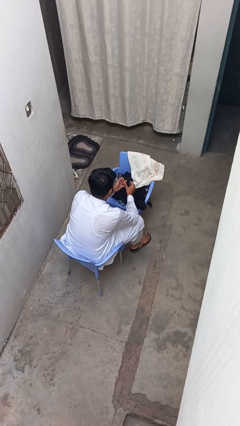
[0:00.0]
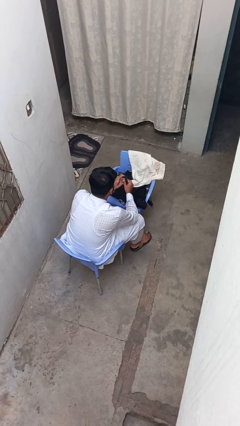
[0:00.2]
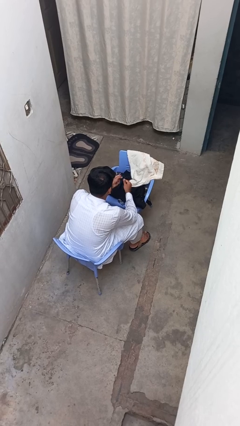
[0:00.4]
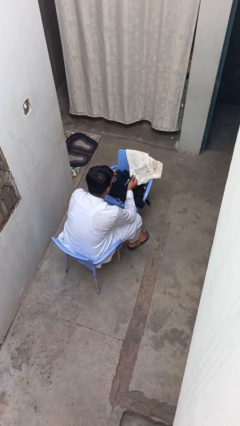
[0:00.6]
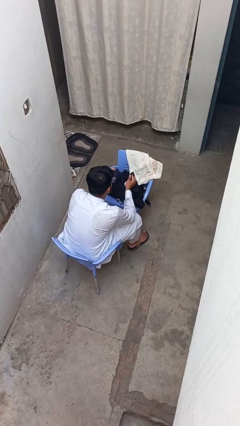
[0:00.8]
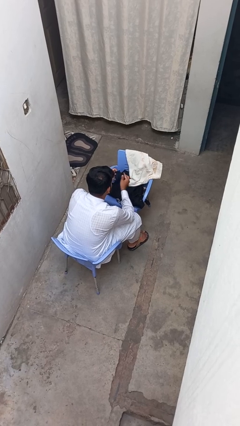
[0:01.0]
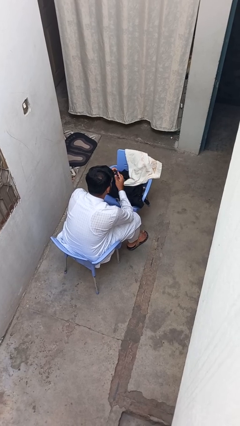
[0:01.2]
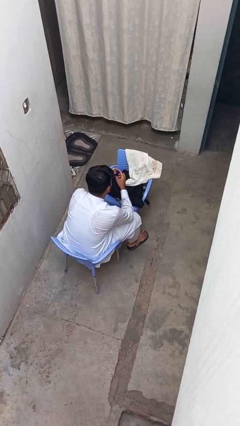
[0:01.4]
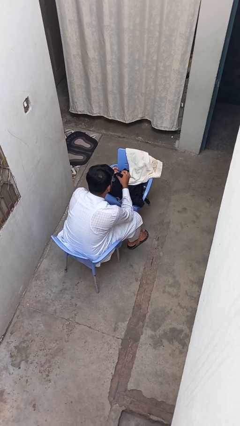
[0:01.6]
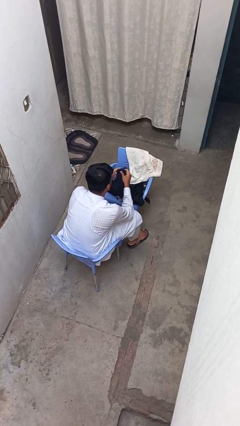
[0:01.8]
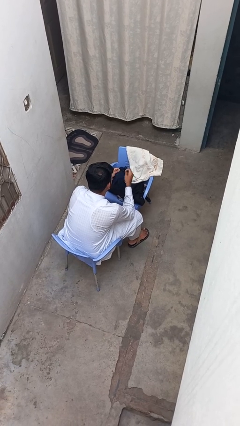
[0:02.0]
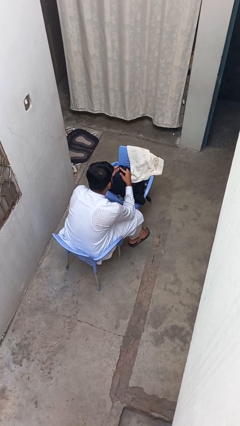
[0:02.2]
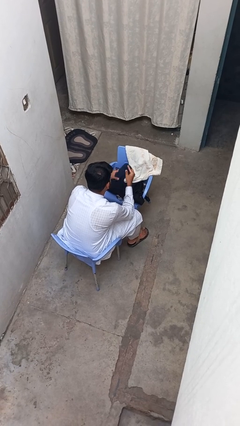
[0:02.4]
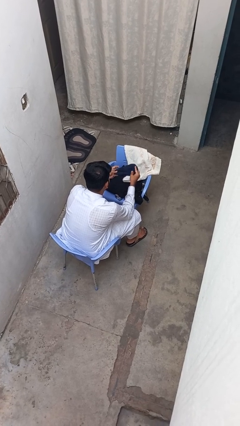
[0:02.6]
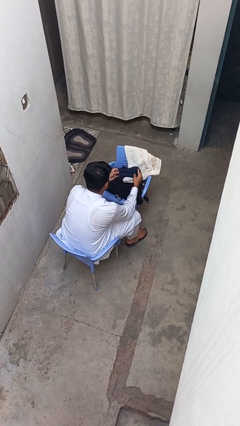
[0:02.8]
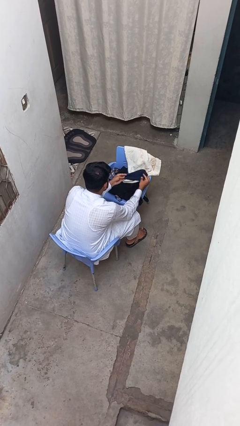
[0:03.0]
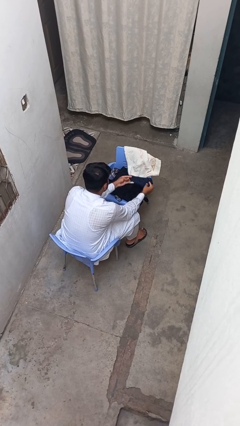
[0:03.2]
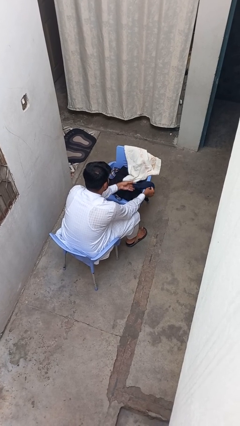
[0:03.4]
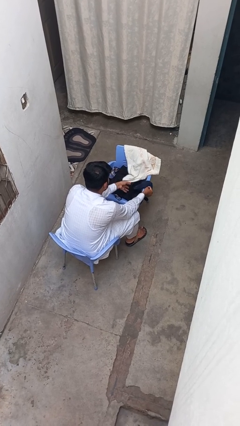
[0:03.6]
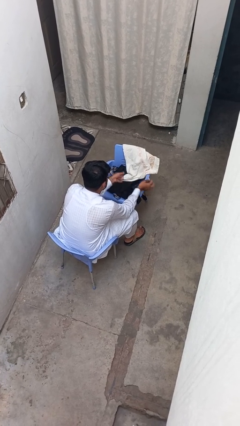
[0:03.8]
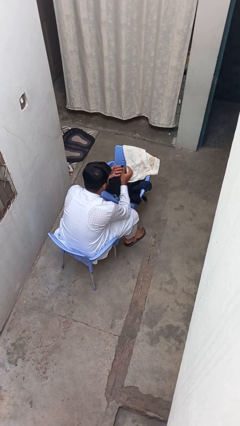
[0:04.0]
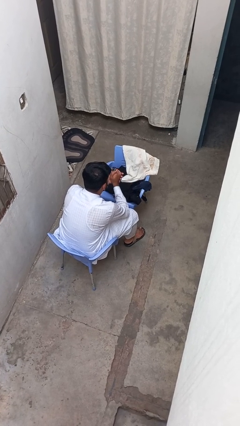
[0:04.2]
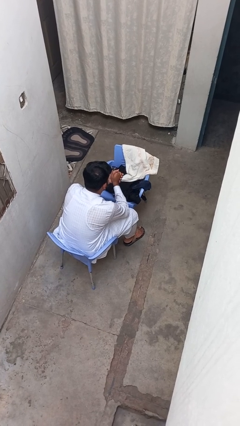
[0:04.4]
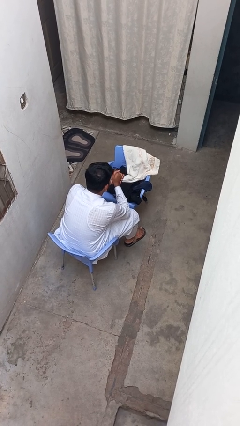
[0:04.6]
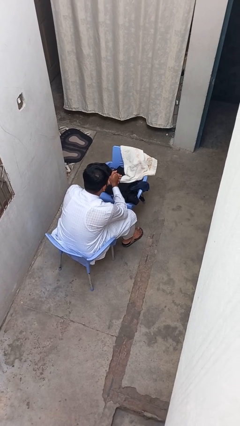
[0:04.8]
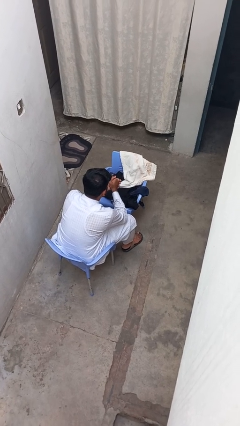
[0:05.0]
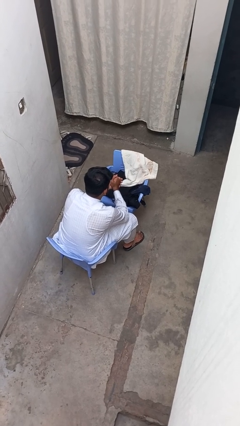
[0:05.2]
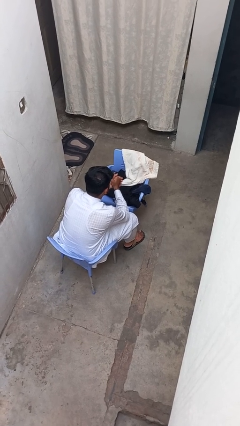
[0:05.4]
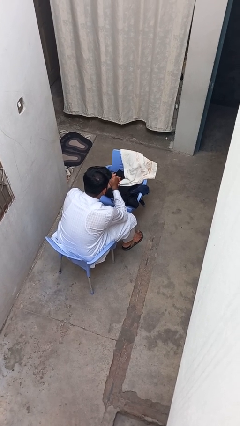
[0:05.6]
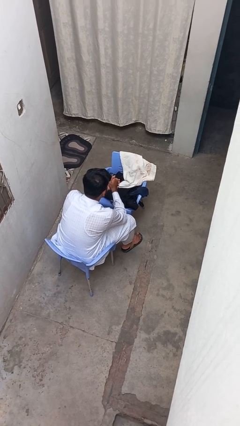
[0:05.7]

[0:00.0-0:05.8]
person folds socks

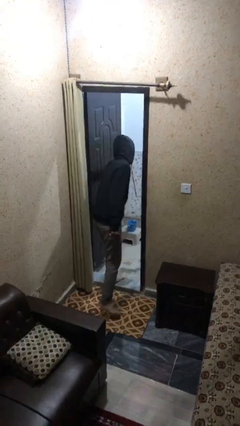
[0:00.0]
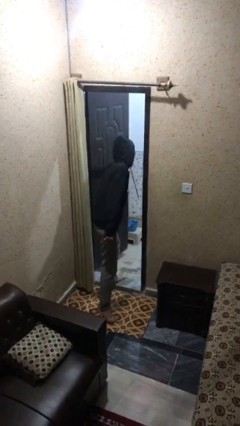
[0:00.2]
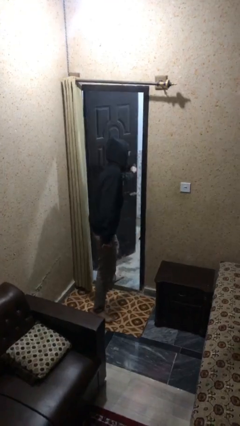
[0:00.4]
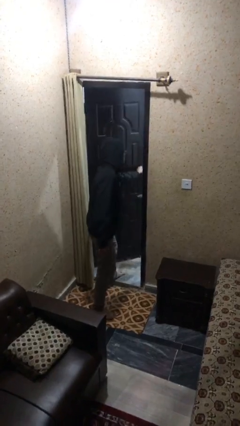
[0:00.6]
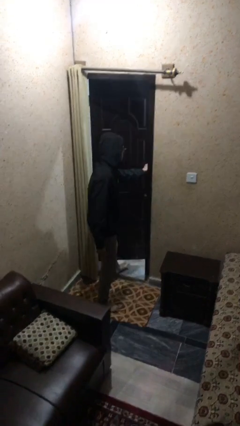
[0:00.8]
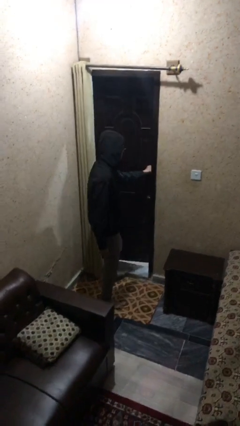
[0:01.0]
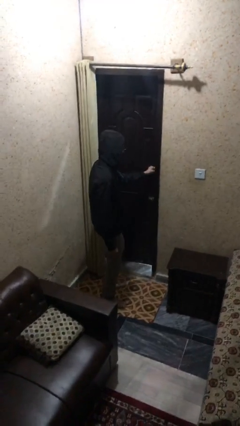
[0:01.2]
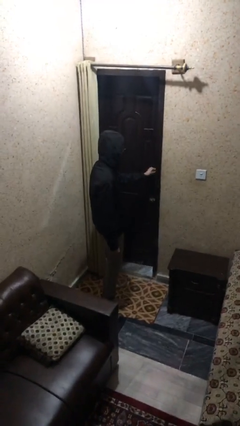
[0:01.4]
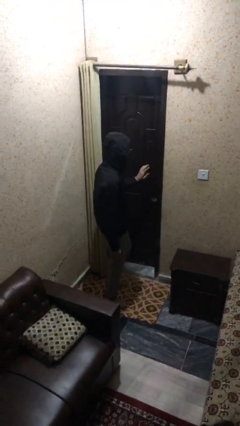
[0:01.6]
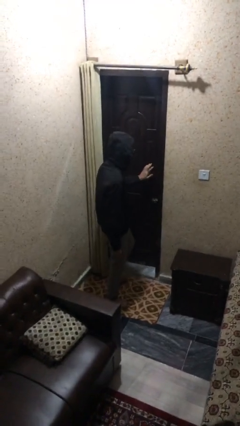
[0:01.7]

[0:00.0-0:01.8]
person closes facility door

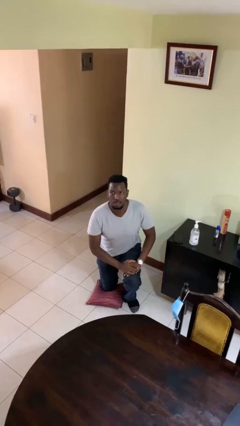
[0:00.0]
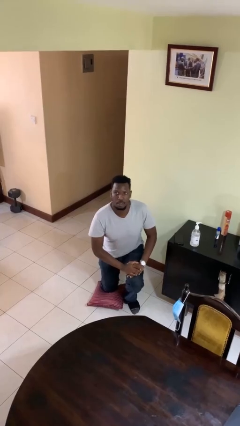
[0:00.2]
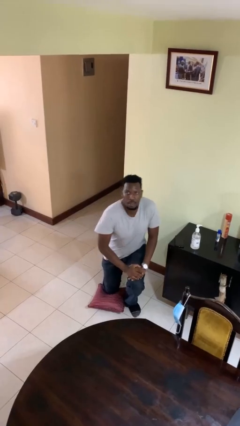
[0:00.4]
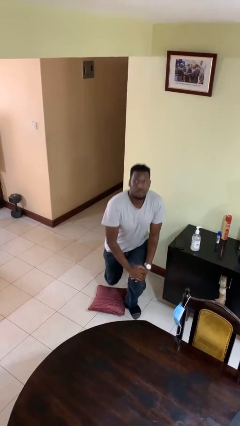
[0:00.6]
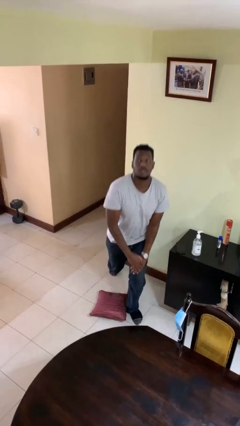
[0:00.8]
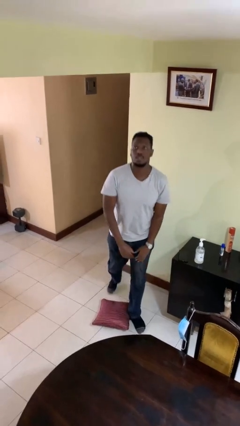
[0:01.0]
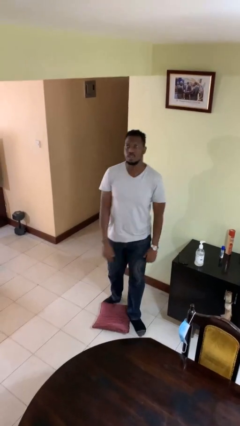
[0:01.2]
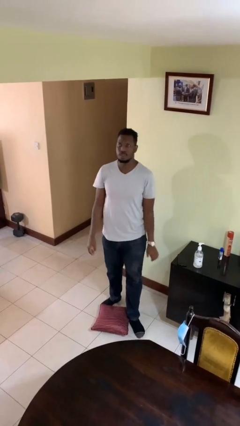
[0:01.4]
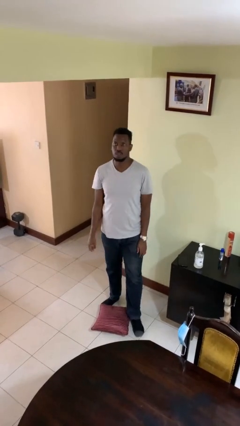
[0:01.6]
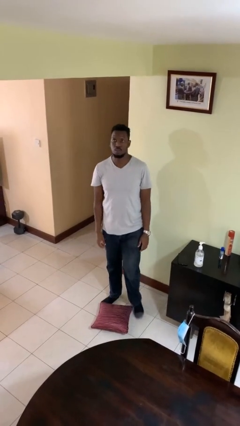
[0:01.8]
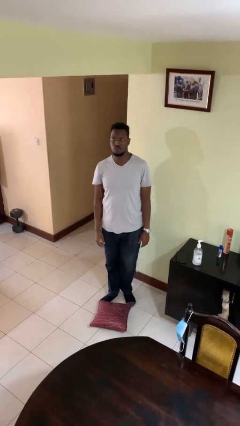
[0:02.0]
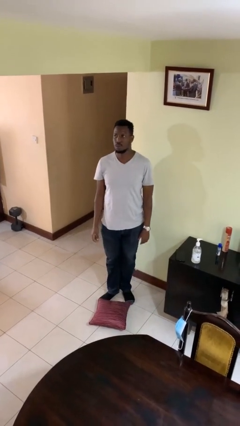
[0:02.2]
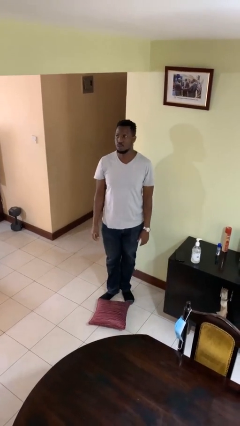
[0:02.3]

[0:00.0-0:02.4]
person stands up from floor

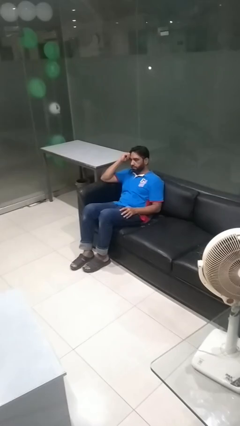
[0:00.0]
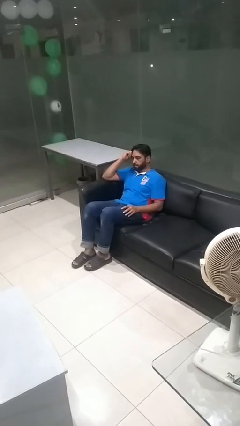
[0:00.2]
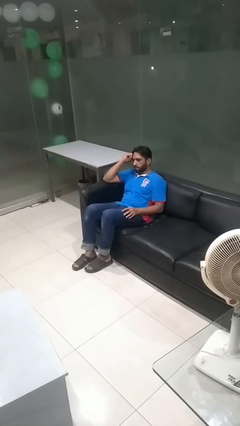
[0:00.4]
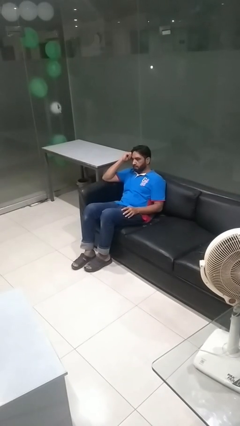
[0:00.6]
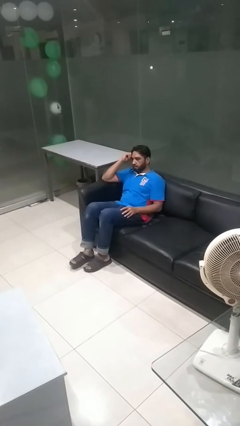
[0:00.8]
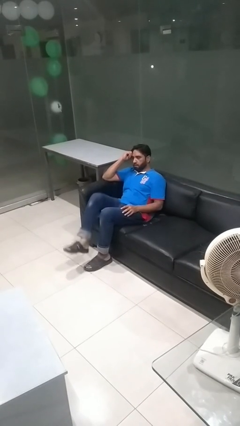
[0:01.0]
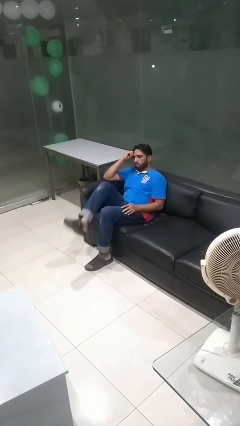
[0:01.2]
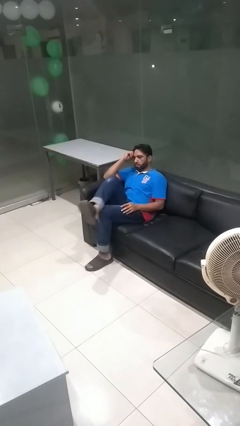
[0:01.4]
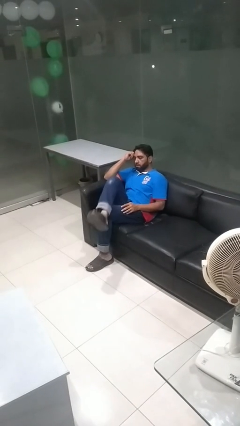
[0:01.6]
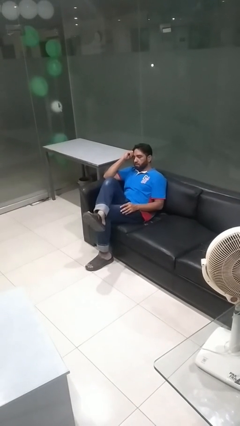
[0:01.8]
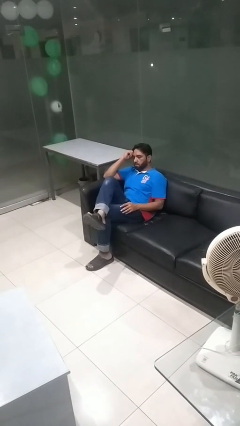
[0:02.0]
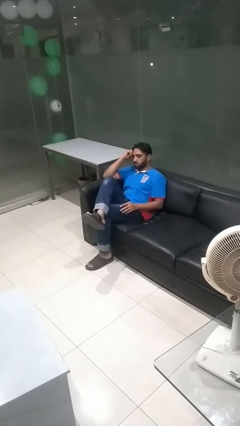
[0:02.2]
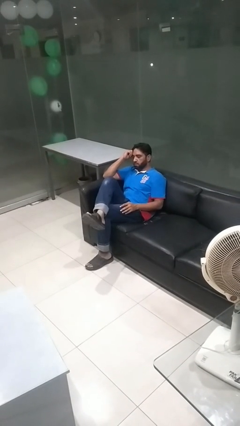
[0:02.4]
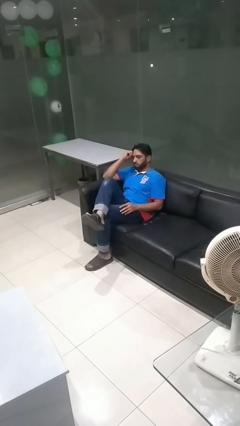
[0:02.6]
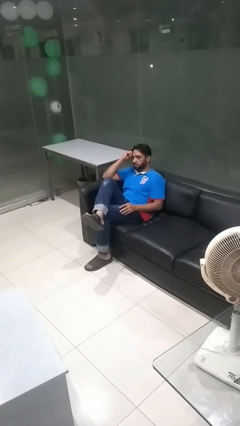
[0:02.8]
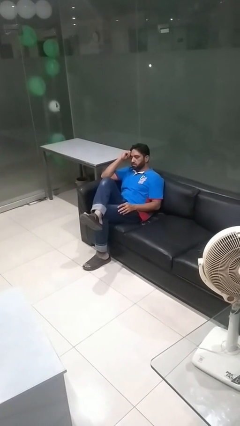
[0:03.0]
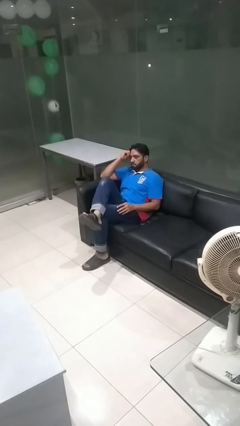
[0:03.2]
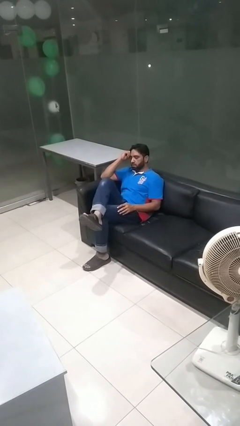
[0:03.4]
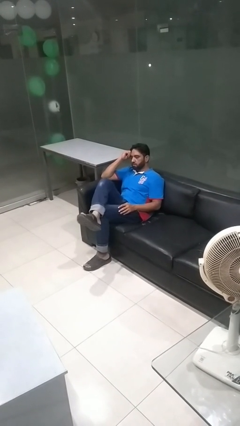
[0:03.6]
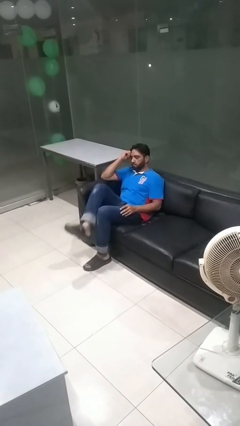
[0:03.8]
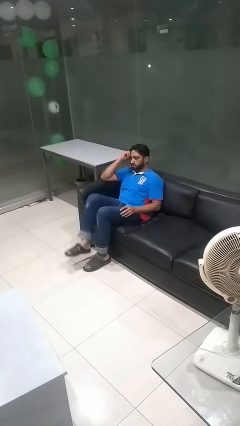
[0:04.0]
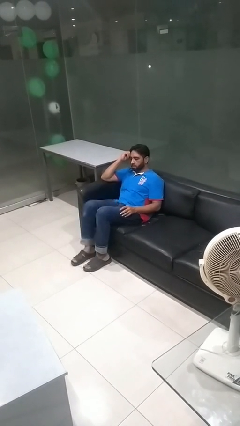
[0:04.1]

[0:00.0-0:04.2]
person crosses legs

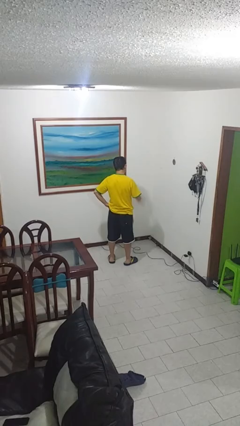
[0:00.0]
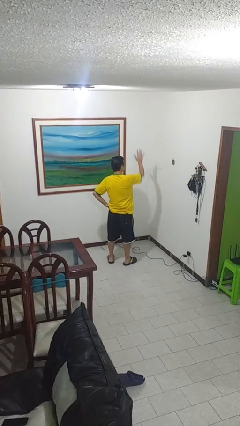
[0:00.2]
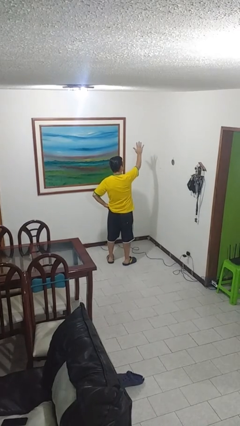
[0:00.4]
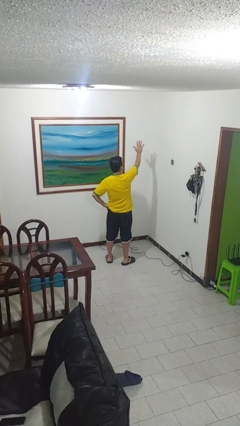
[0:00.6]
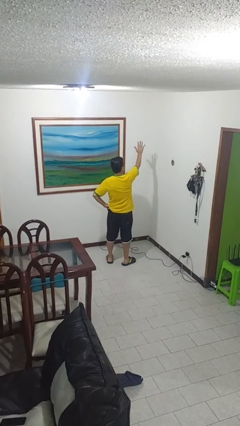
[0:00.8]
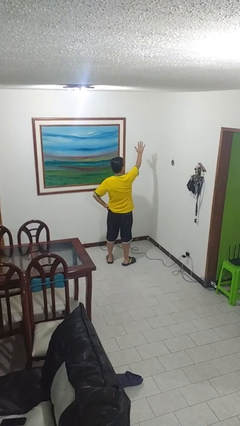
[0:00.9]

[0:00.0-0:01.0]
person gestures number five

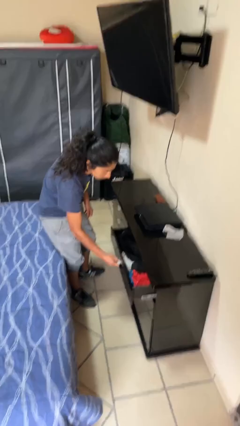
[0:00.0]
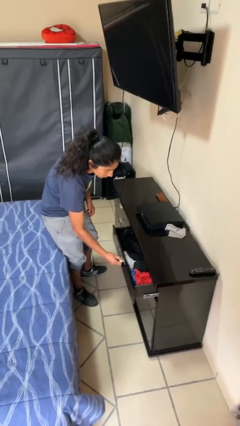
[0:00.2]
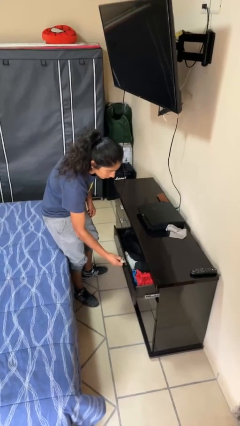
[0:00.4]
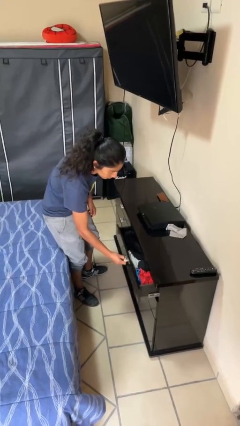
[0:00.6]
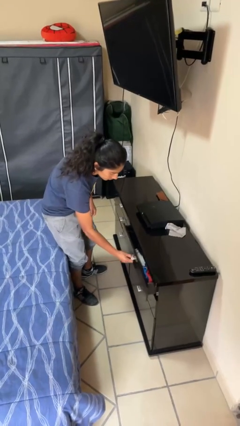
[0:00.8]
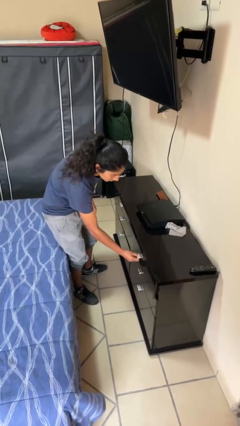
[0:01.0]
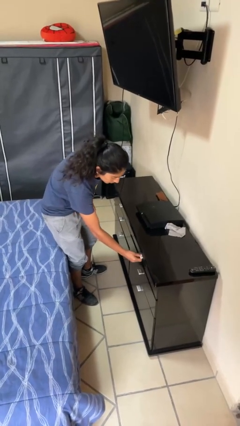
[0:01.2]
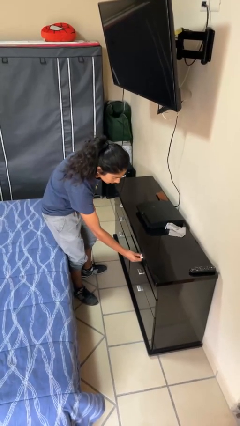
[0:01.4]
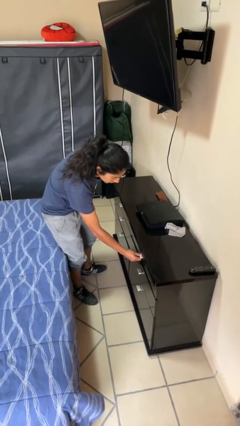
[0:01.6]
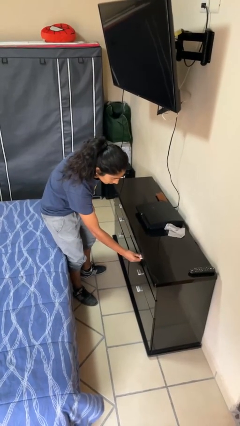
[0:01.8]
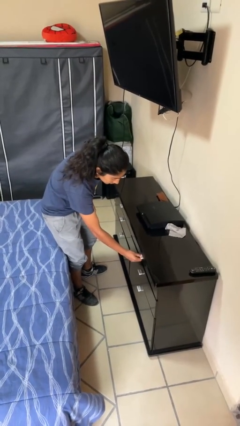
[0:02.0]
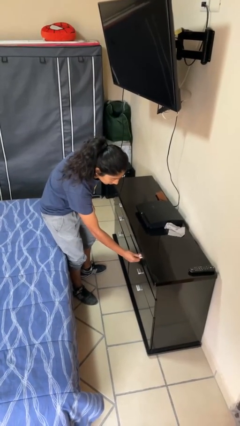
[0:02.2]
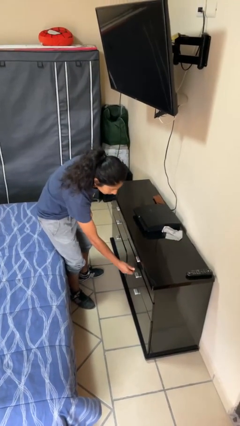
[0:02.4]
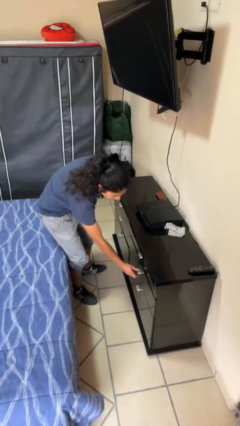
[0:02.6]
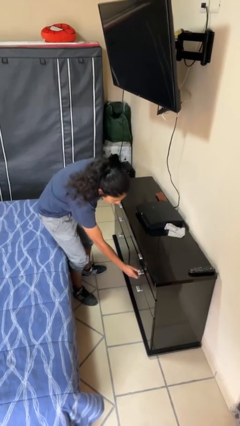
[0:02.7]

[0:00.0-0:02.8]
person closes dresser drawer
